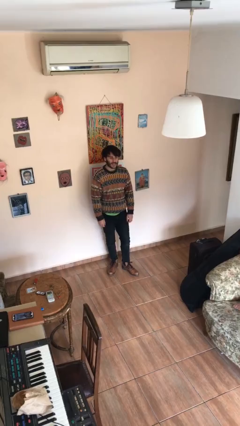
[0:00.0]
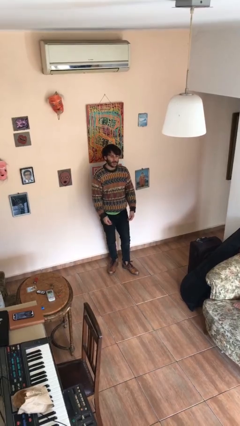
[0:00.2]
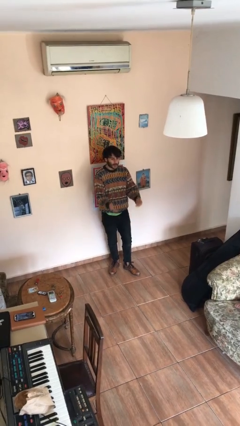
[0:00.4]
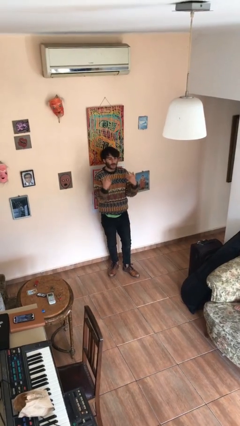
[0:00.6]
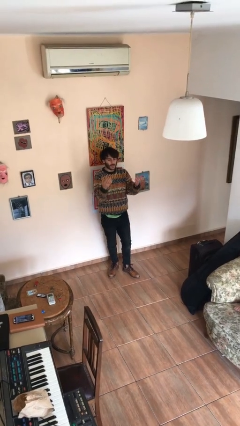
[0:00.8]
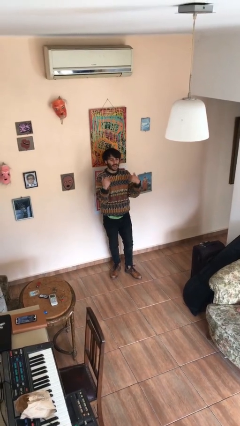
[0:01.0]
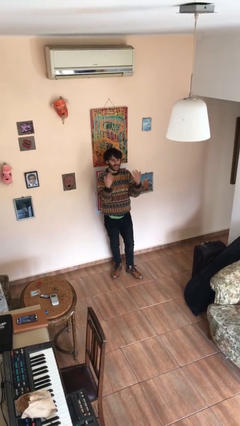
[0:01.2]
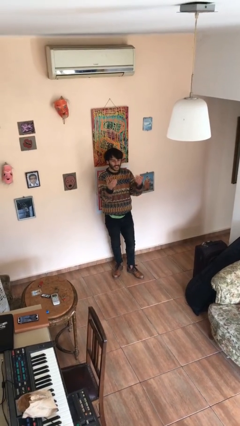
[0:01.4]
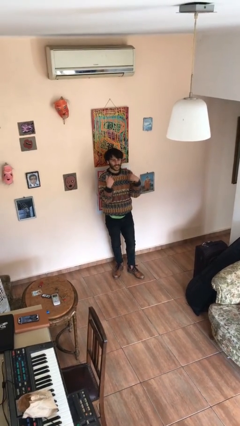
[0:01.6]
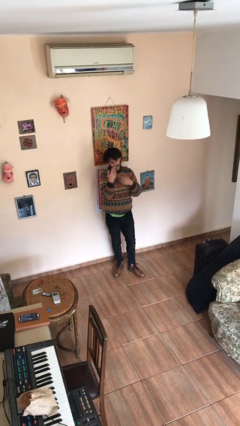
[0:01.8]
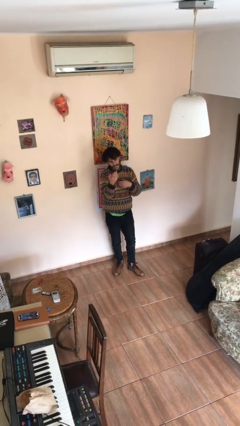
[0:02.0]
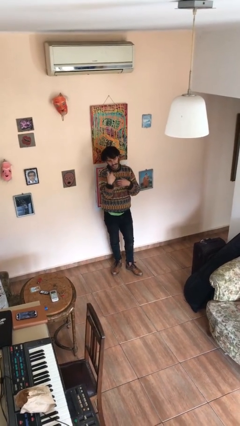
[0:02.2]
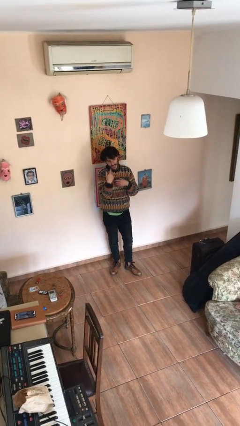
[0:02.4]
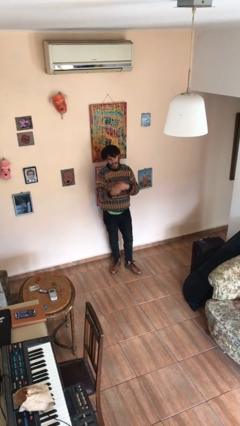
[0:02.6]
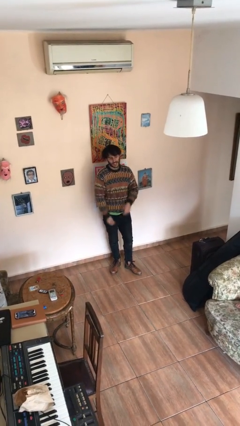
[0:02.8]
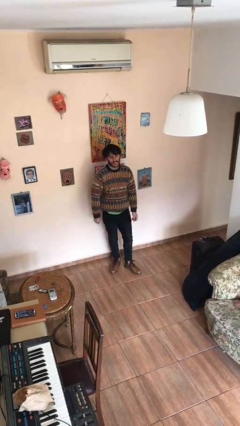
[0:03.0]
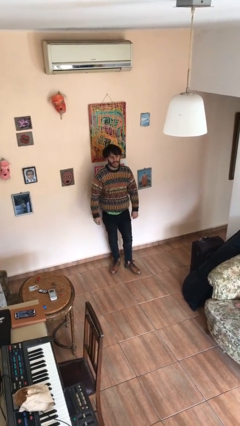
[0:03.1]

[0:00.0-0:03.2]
person gestures come here

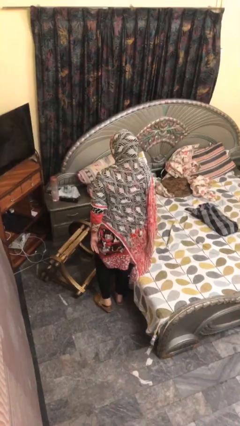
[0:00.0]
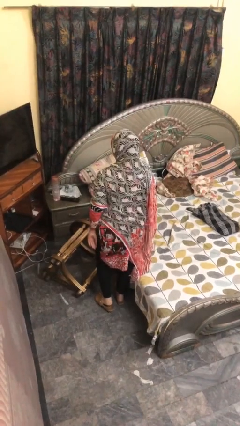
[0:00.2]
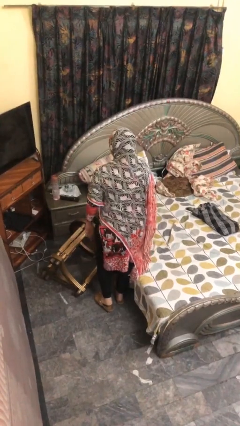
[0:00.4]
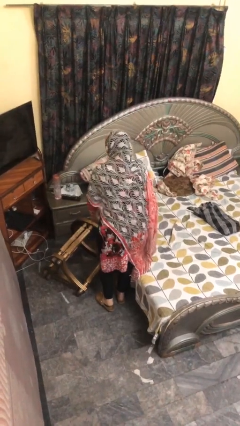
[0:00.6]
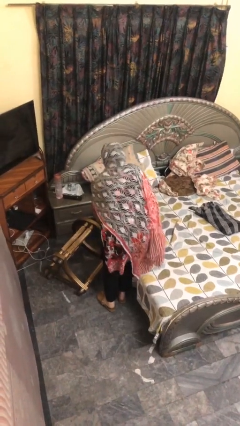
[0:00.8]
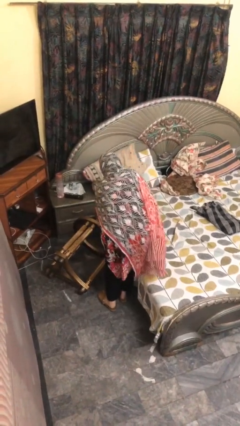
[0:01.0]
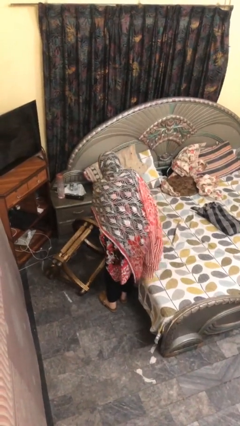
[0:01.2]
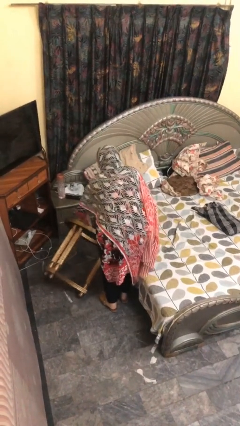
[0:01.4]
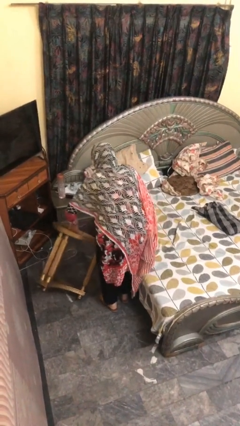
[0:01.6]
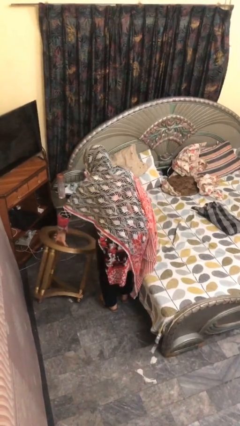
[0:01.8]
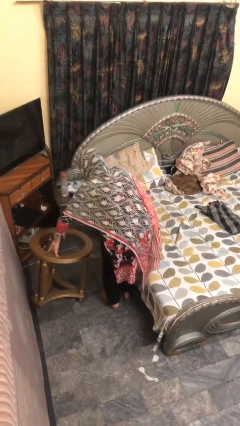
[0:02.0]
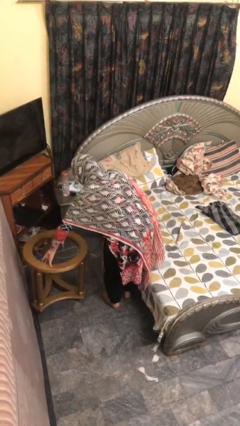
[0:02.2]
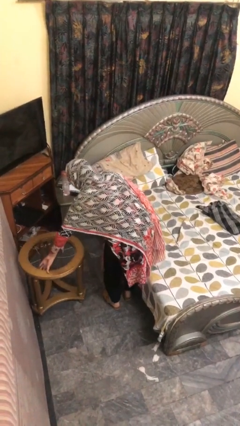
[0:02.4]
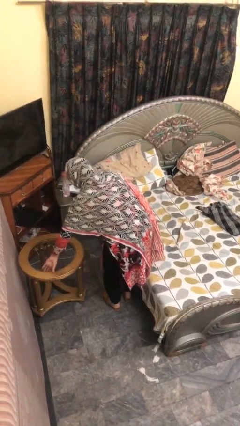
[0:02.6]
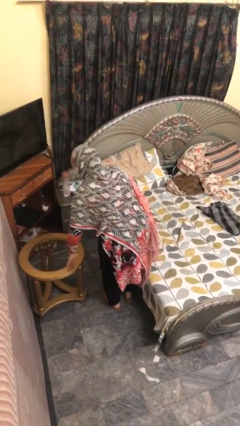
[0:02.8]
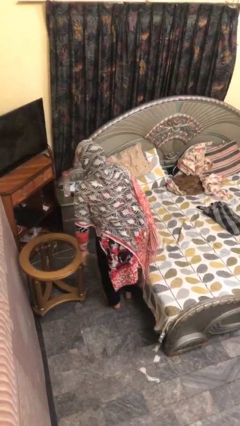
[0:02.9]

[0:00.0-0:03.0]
person sets upright furniture

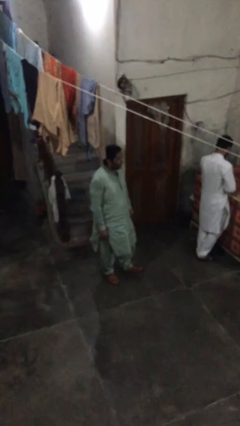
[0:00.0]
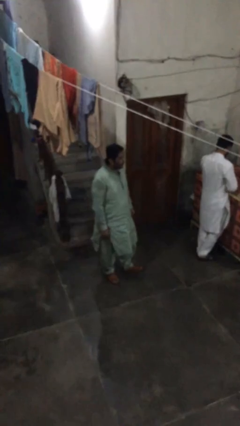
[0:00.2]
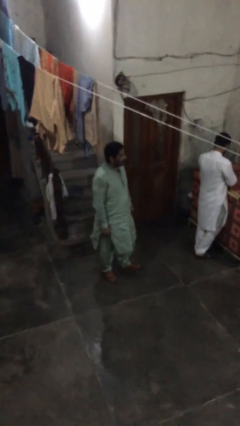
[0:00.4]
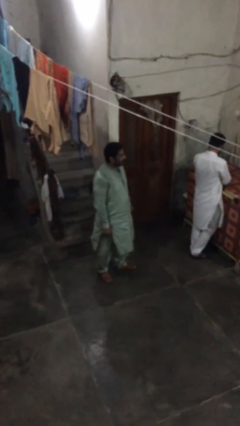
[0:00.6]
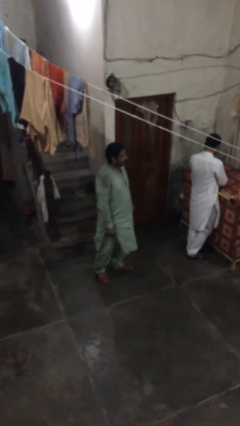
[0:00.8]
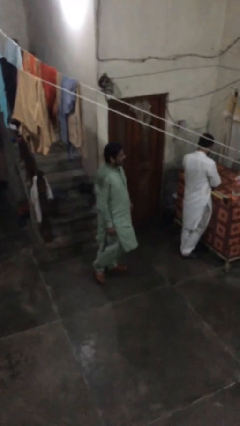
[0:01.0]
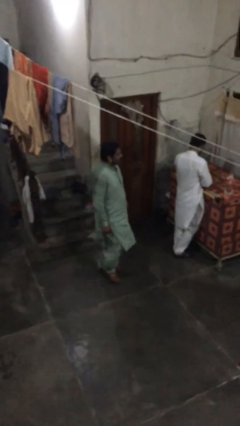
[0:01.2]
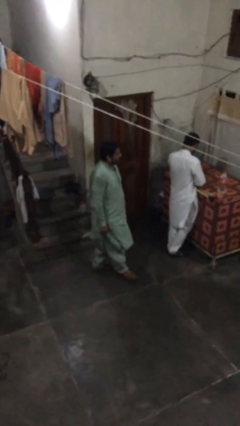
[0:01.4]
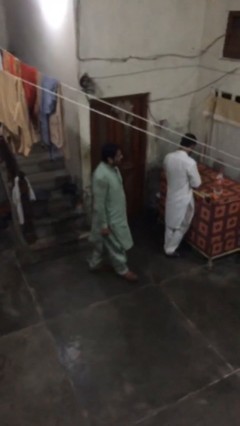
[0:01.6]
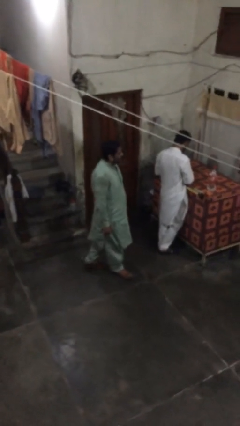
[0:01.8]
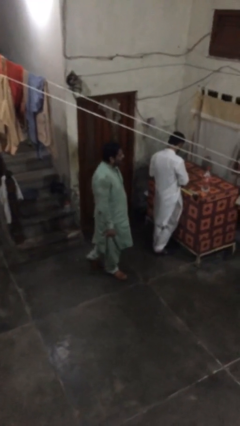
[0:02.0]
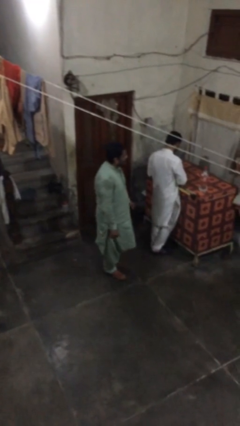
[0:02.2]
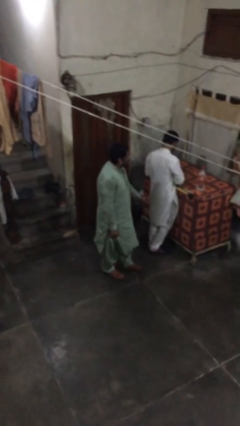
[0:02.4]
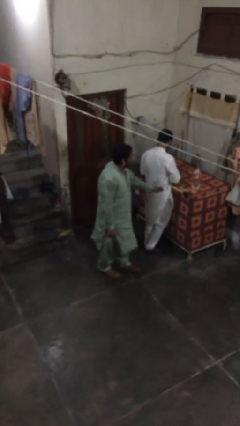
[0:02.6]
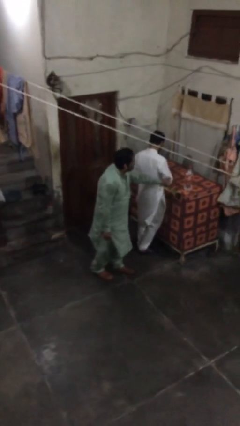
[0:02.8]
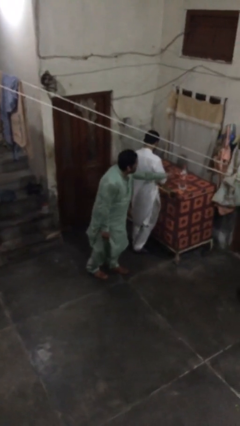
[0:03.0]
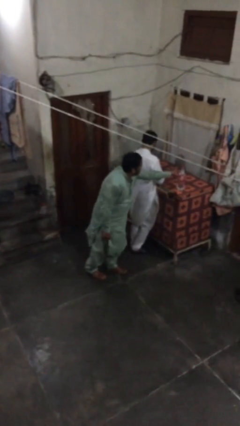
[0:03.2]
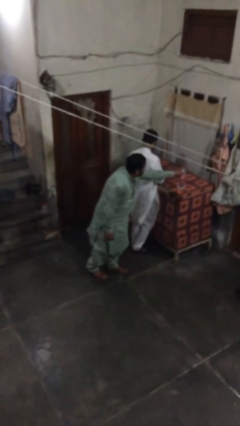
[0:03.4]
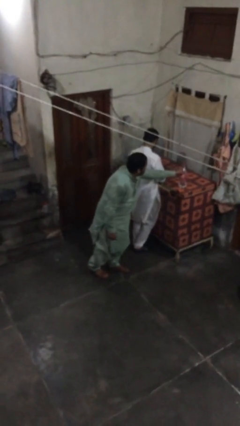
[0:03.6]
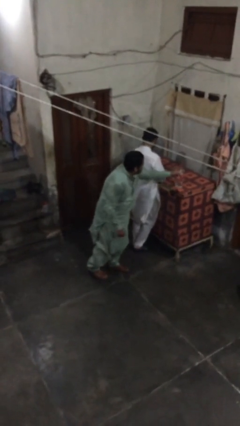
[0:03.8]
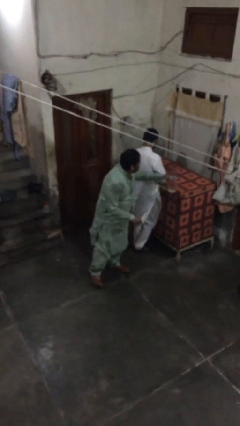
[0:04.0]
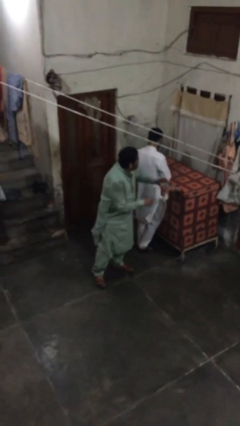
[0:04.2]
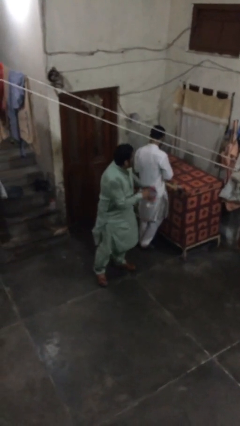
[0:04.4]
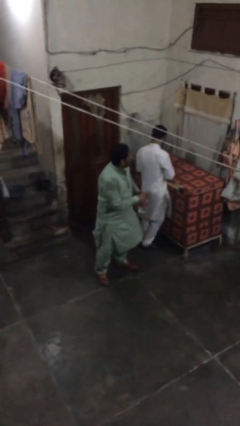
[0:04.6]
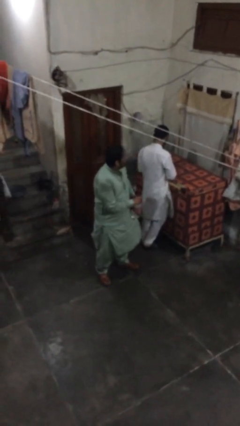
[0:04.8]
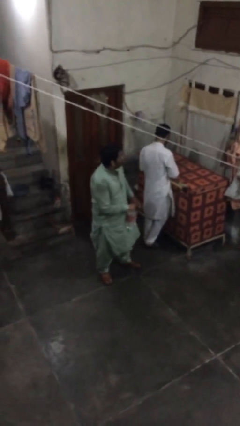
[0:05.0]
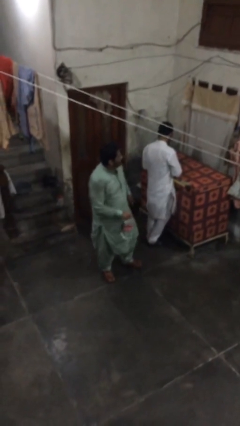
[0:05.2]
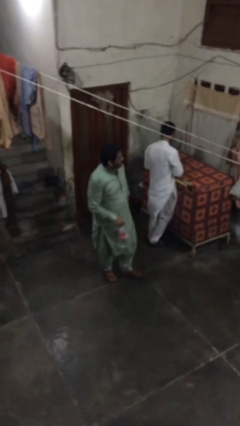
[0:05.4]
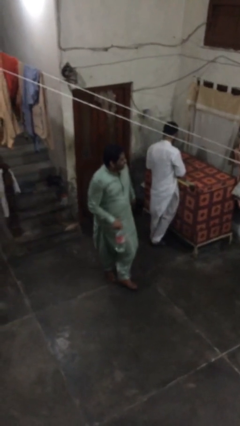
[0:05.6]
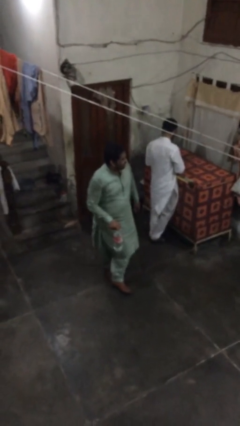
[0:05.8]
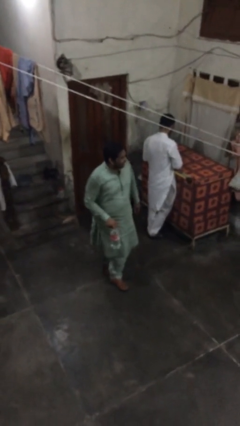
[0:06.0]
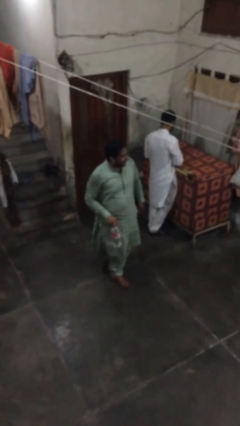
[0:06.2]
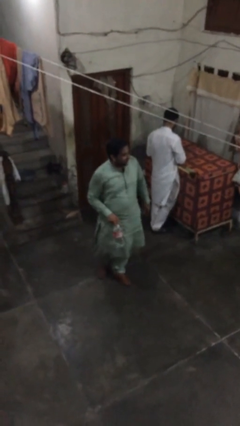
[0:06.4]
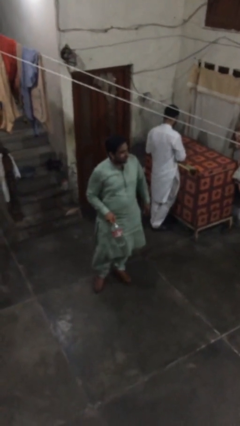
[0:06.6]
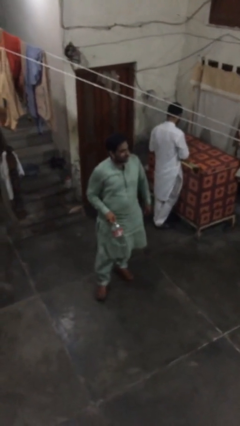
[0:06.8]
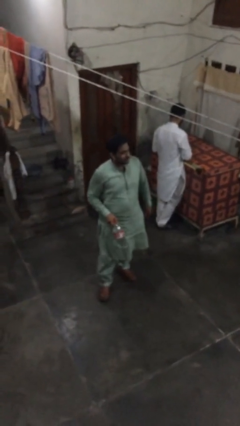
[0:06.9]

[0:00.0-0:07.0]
person steals object from person

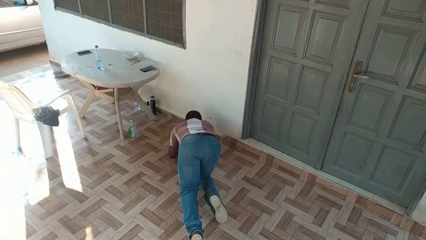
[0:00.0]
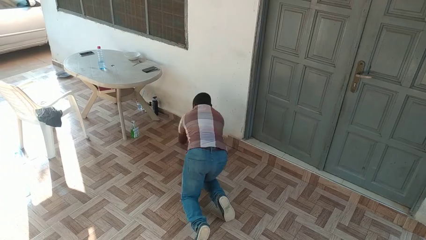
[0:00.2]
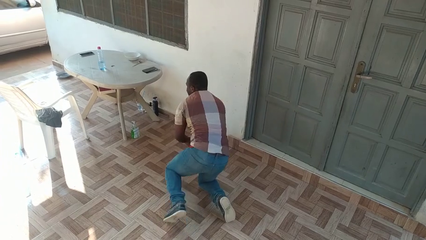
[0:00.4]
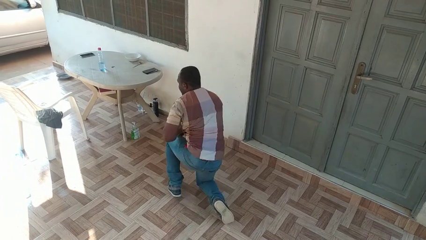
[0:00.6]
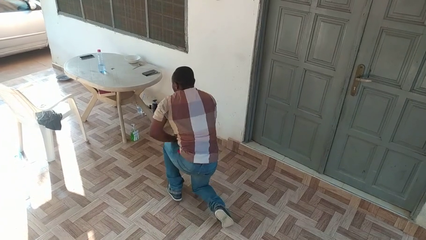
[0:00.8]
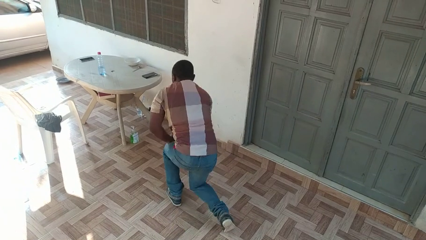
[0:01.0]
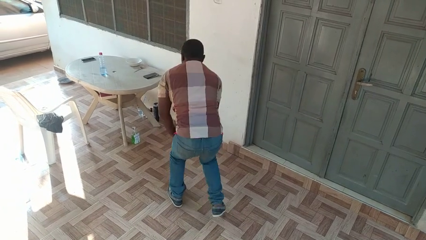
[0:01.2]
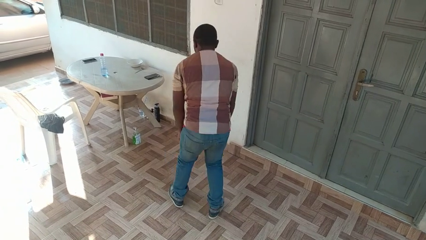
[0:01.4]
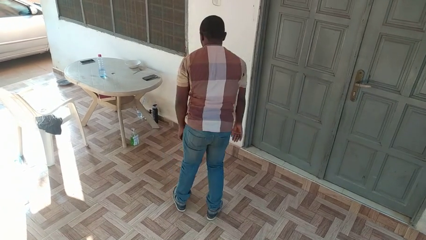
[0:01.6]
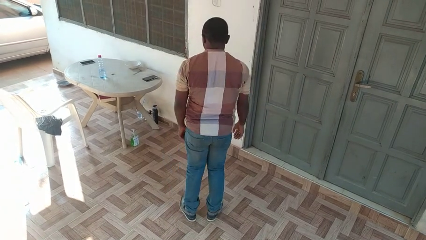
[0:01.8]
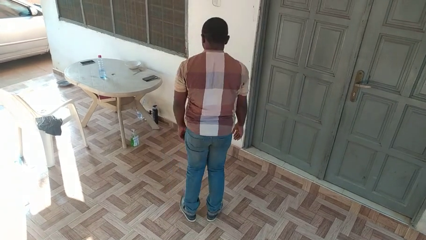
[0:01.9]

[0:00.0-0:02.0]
person stands up from floor

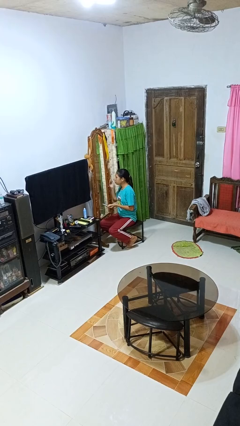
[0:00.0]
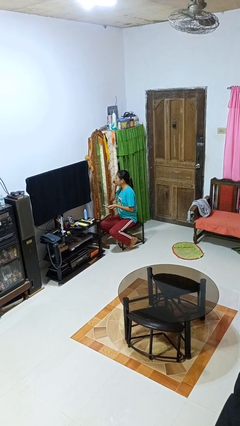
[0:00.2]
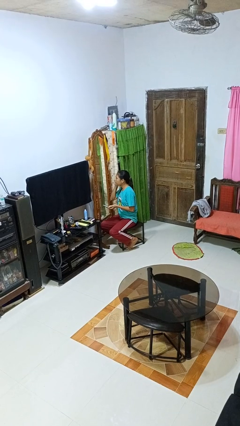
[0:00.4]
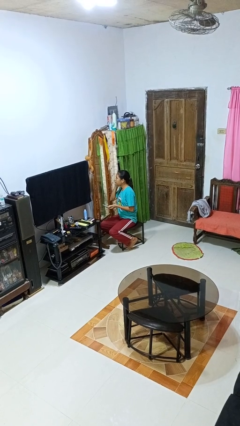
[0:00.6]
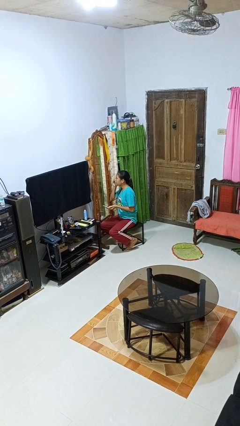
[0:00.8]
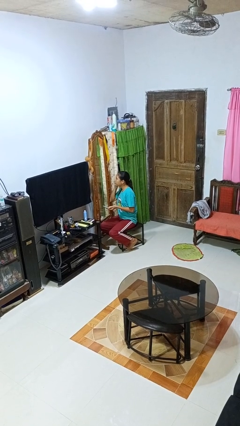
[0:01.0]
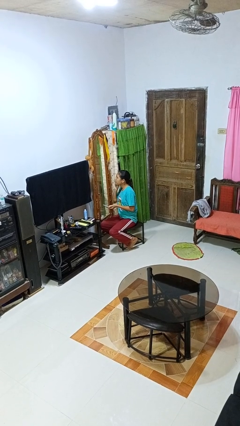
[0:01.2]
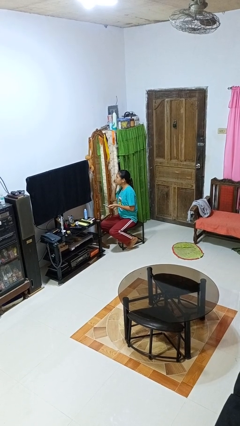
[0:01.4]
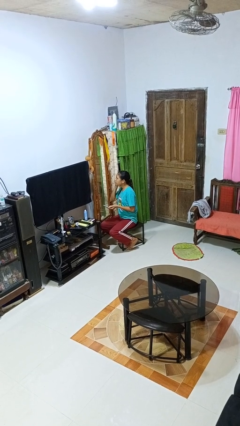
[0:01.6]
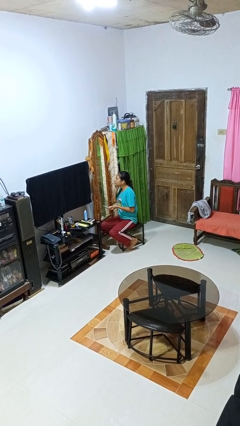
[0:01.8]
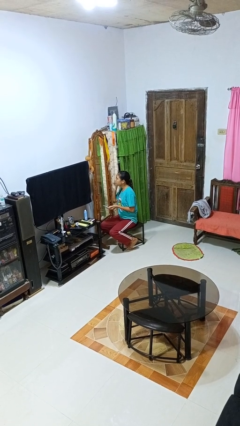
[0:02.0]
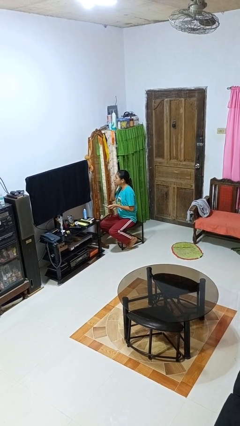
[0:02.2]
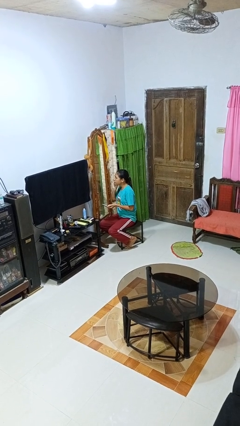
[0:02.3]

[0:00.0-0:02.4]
person applies foundation makeup
